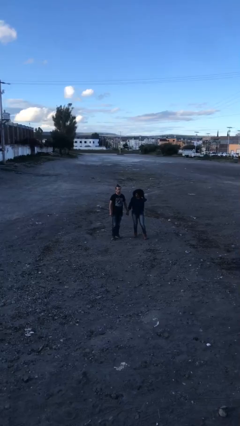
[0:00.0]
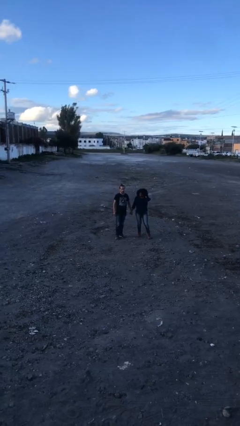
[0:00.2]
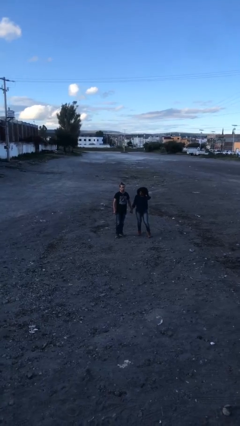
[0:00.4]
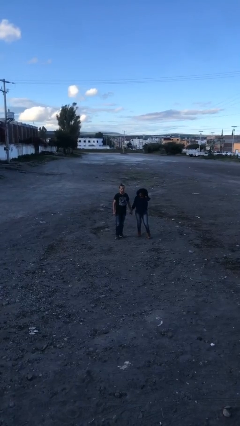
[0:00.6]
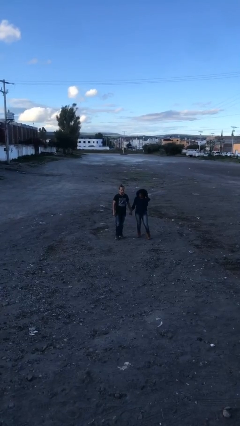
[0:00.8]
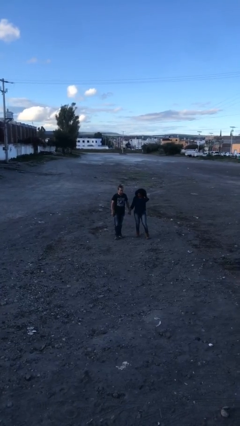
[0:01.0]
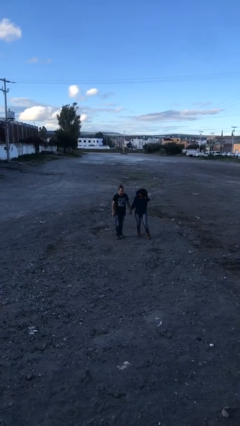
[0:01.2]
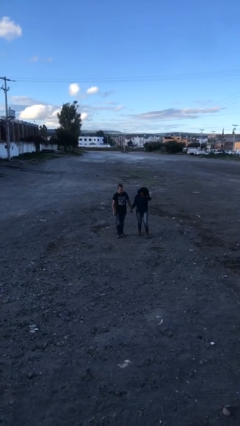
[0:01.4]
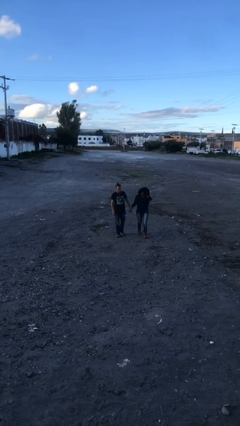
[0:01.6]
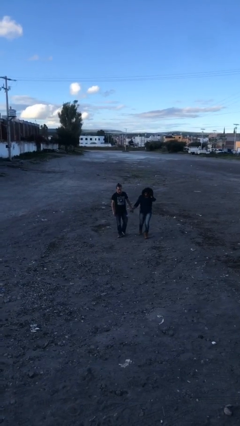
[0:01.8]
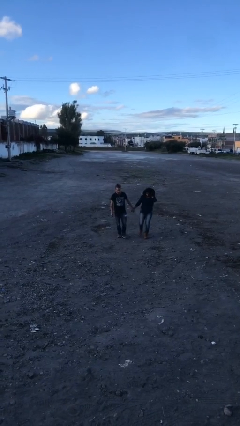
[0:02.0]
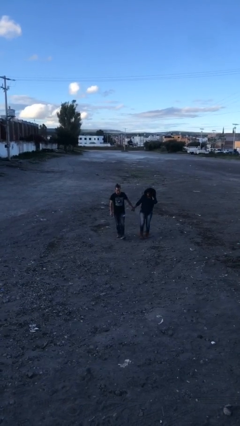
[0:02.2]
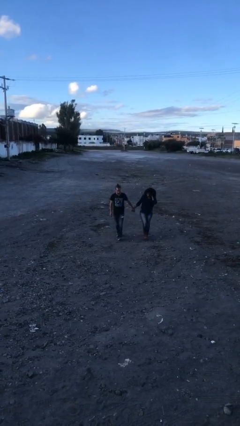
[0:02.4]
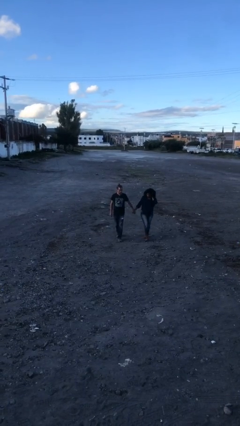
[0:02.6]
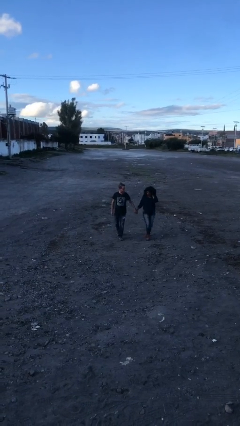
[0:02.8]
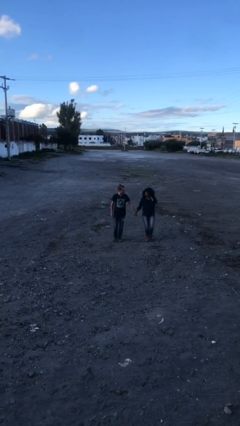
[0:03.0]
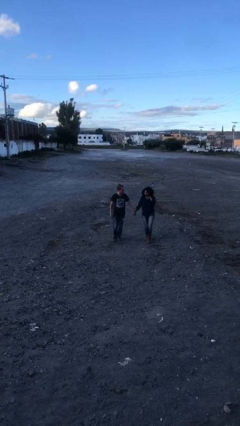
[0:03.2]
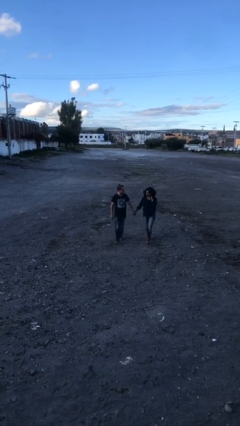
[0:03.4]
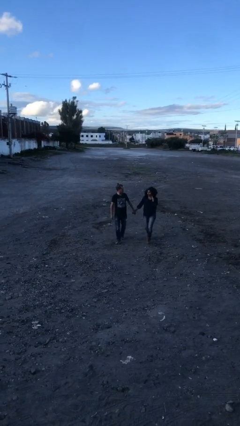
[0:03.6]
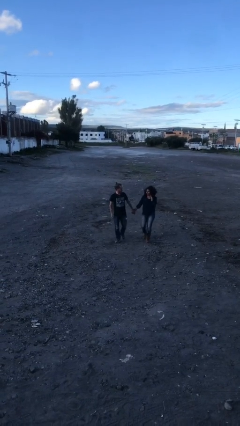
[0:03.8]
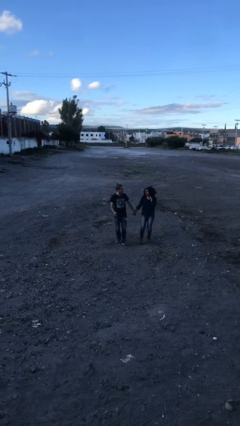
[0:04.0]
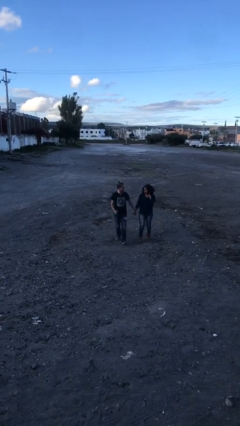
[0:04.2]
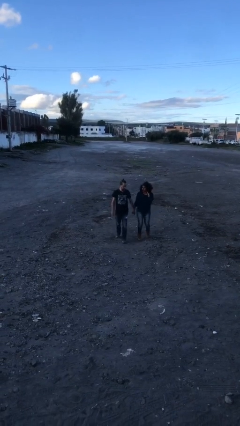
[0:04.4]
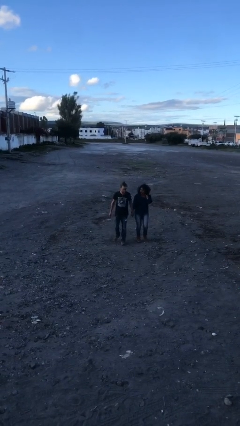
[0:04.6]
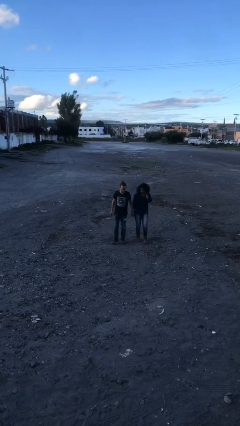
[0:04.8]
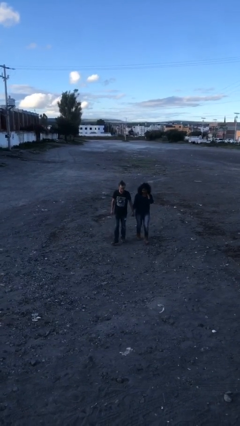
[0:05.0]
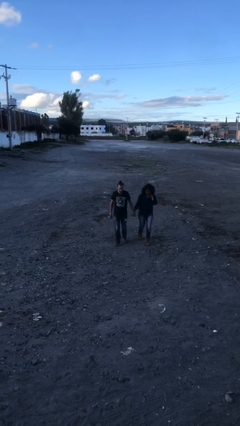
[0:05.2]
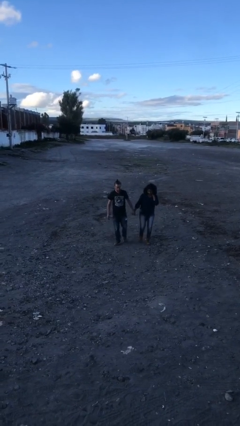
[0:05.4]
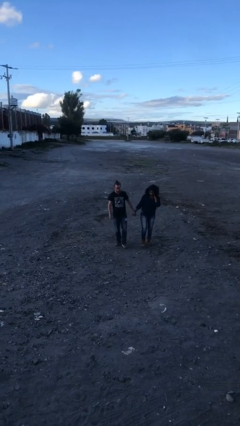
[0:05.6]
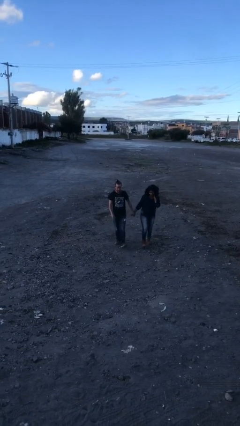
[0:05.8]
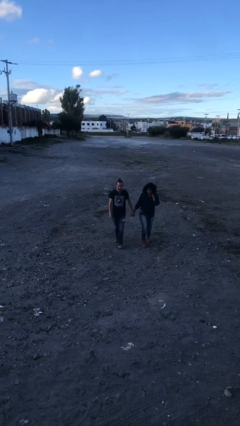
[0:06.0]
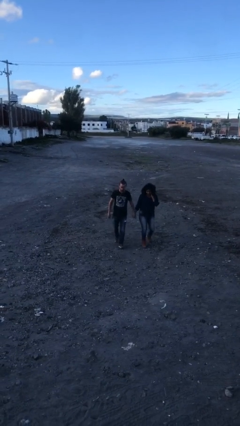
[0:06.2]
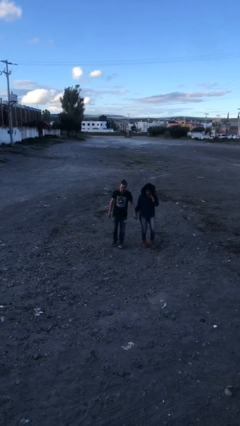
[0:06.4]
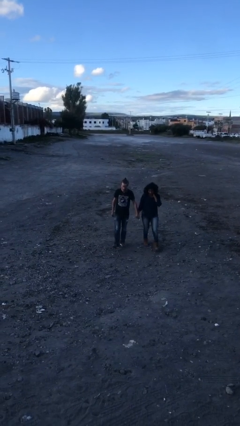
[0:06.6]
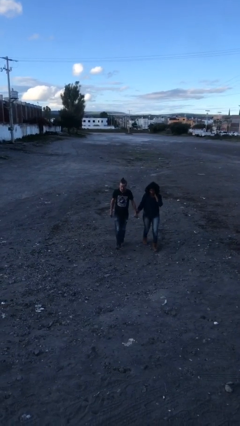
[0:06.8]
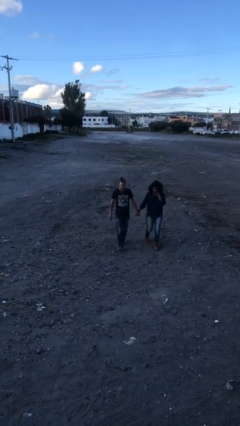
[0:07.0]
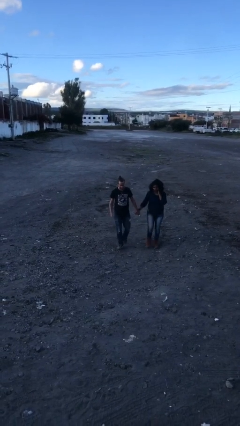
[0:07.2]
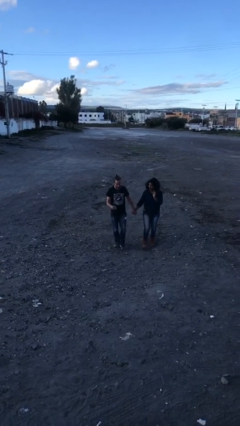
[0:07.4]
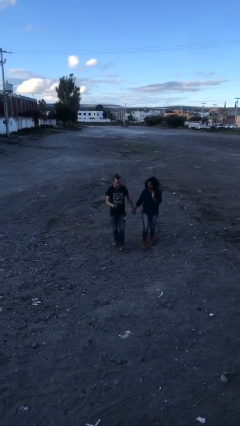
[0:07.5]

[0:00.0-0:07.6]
person holds hand

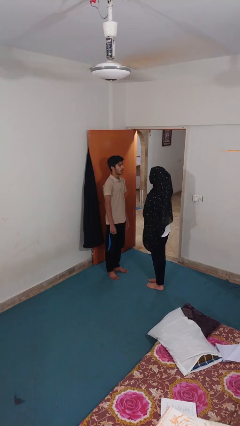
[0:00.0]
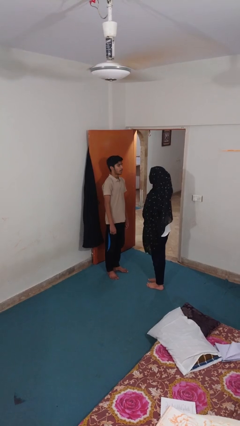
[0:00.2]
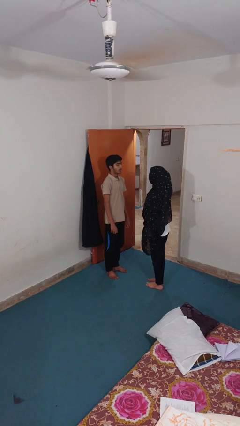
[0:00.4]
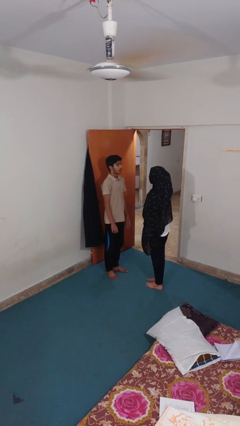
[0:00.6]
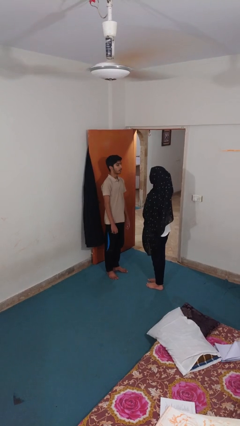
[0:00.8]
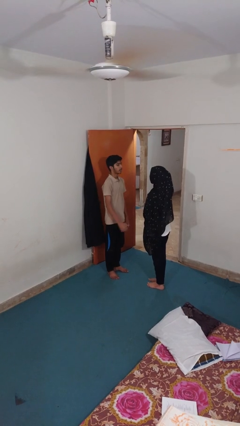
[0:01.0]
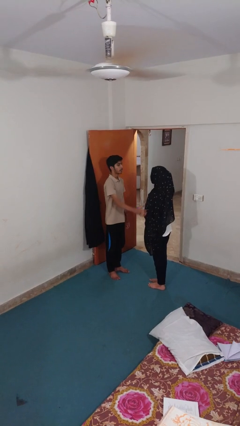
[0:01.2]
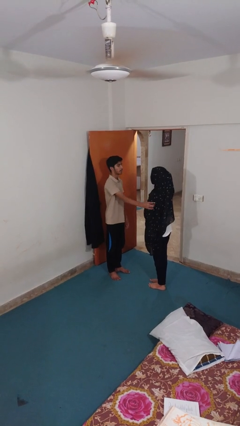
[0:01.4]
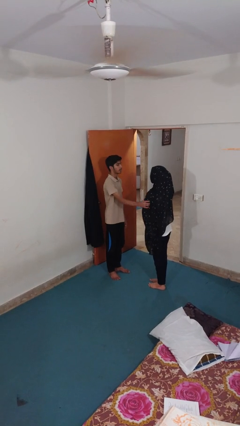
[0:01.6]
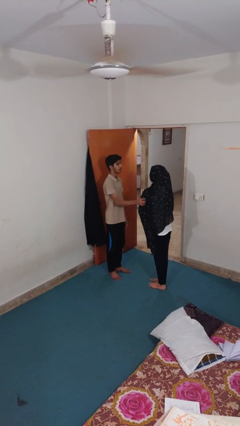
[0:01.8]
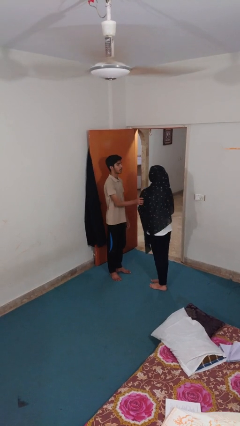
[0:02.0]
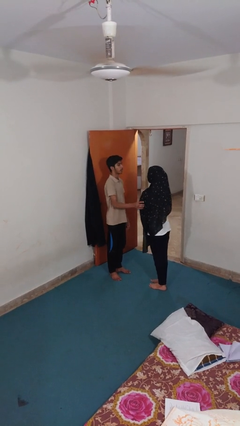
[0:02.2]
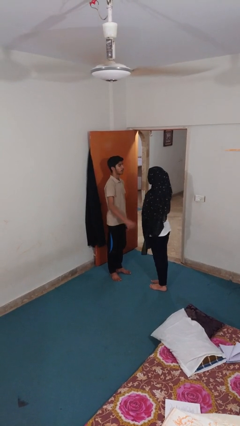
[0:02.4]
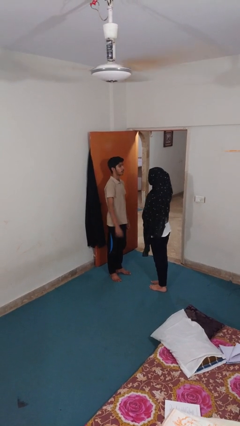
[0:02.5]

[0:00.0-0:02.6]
person grabs person by bicep

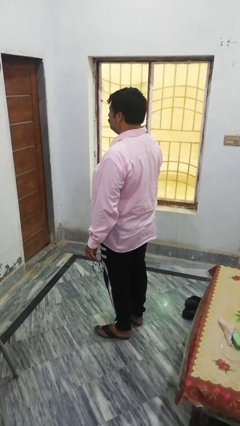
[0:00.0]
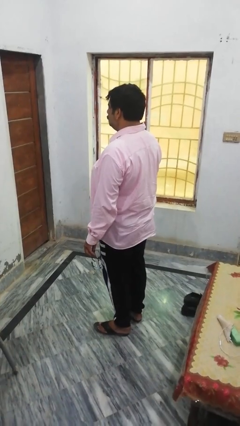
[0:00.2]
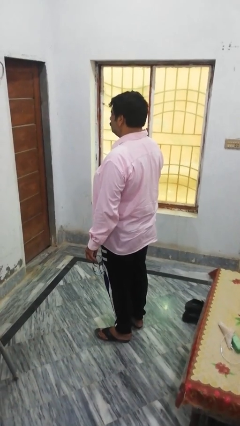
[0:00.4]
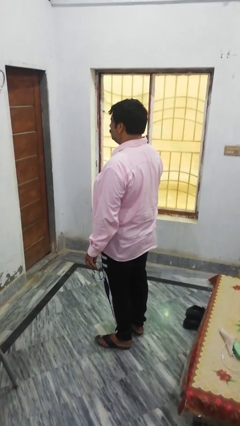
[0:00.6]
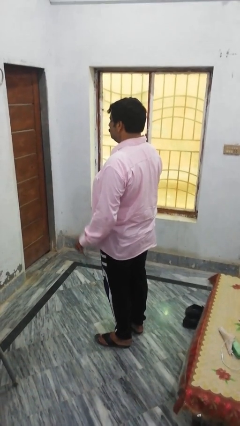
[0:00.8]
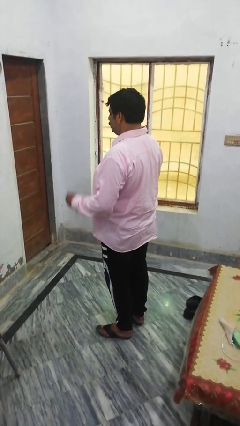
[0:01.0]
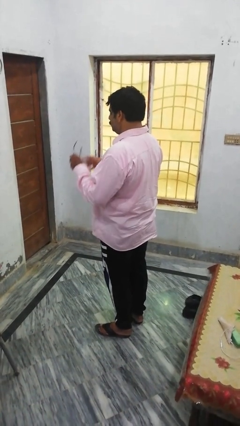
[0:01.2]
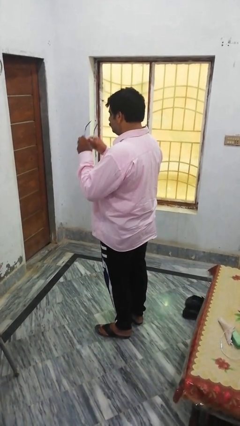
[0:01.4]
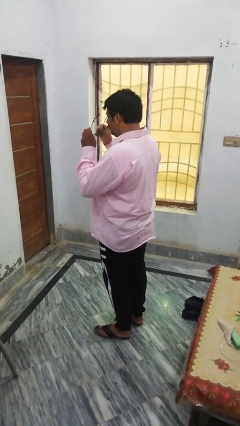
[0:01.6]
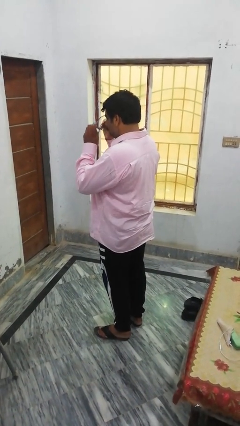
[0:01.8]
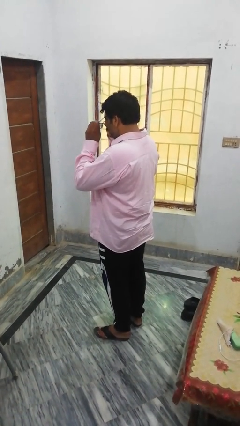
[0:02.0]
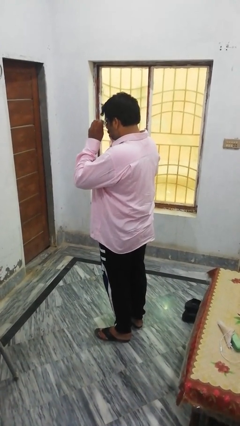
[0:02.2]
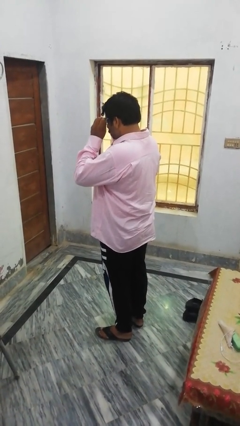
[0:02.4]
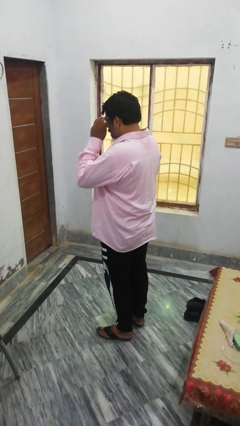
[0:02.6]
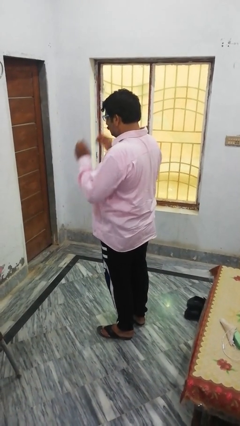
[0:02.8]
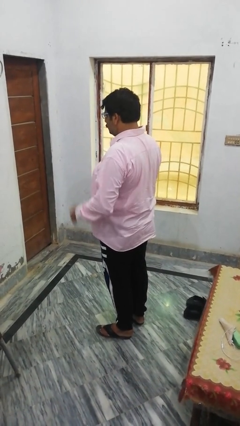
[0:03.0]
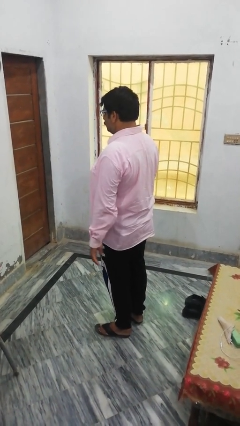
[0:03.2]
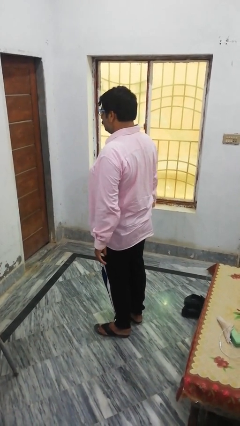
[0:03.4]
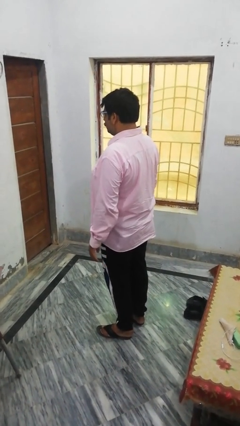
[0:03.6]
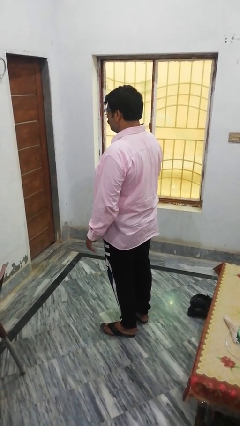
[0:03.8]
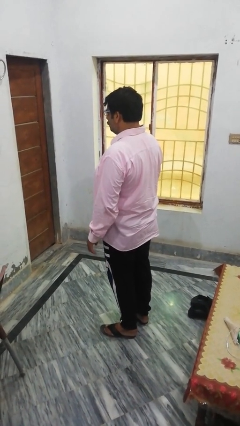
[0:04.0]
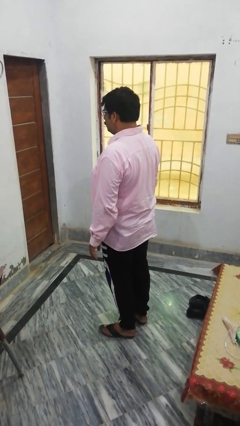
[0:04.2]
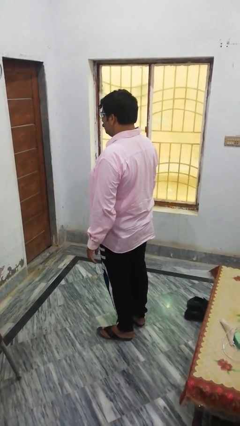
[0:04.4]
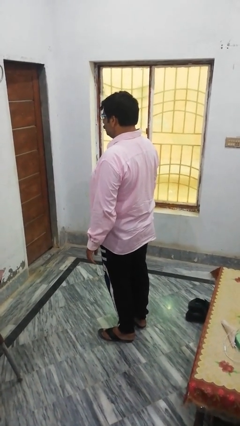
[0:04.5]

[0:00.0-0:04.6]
person puts on glasses

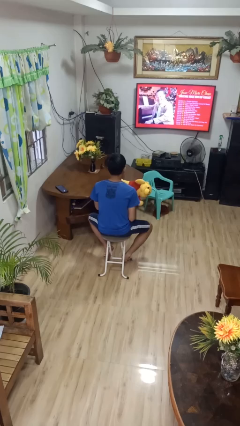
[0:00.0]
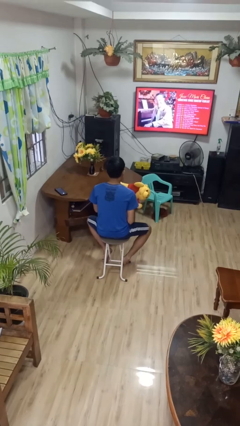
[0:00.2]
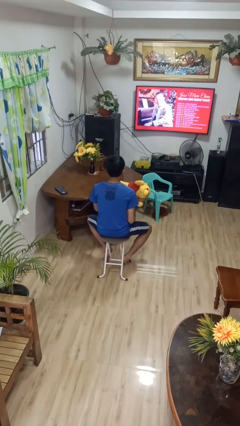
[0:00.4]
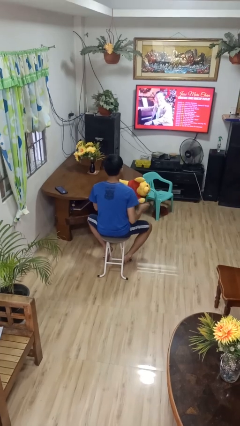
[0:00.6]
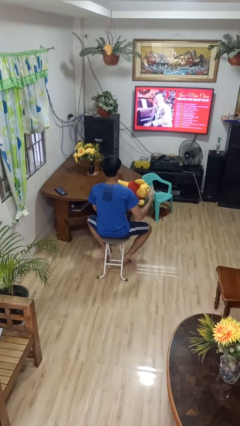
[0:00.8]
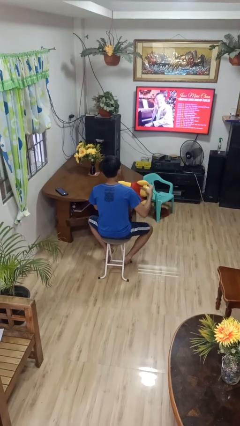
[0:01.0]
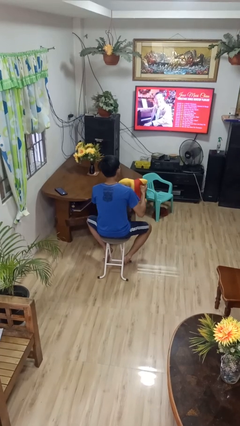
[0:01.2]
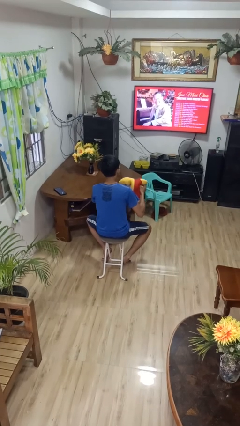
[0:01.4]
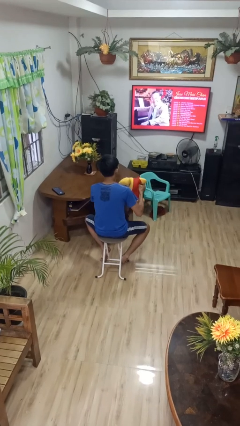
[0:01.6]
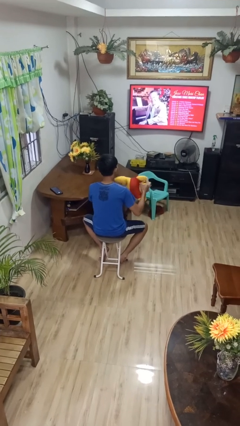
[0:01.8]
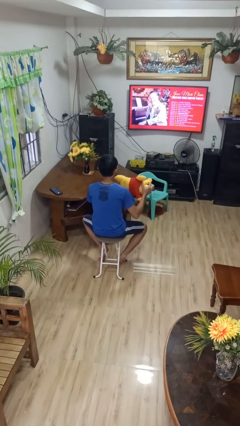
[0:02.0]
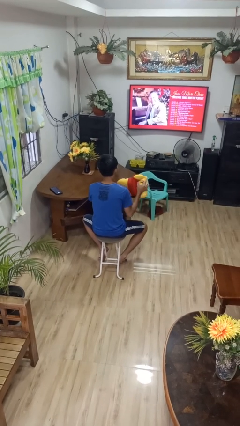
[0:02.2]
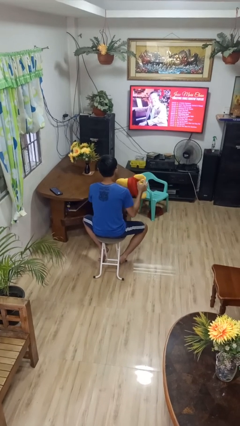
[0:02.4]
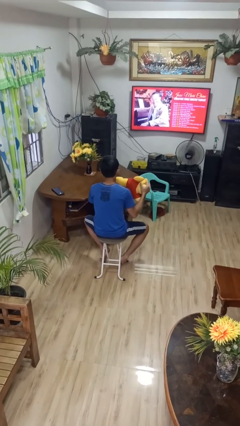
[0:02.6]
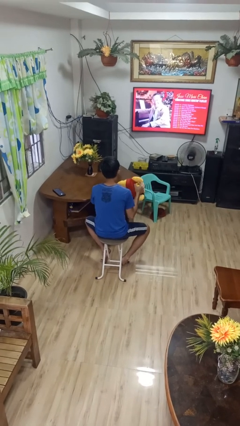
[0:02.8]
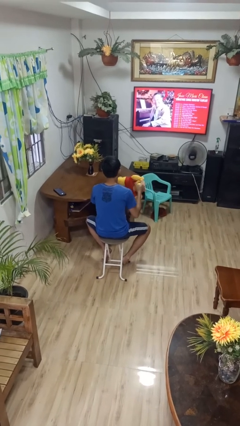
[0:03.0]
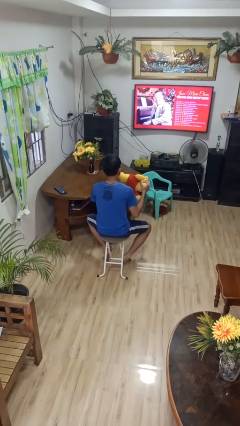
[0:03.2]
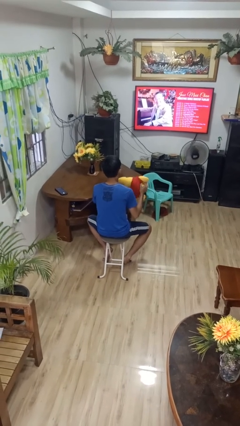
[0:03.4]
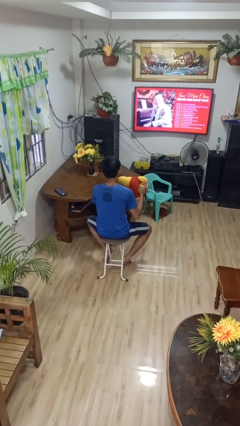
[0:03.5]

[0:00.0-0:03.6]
person squeezes object
